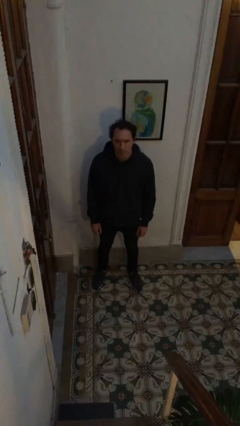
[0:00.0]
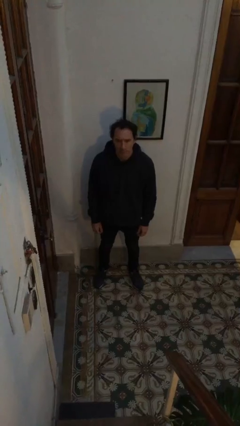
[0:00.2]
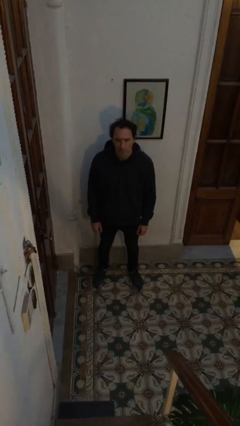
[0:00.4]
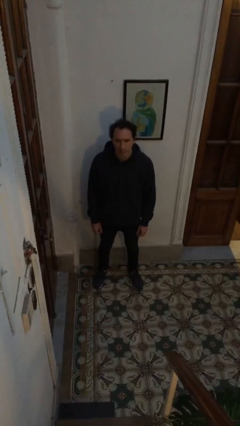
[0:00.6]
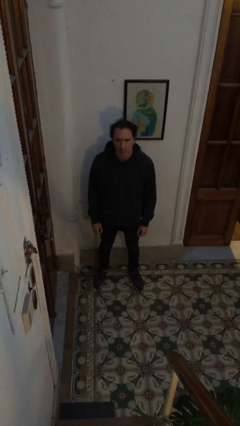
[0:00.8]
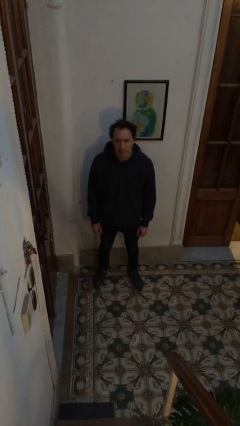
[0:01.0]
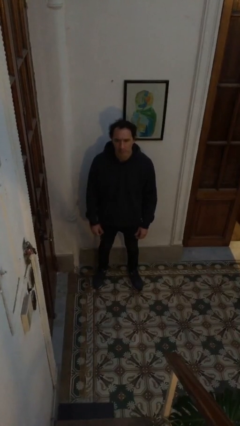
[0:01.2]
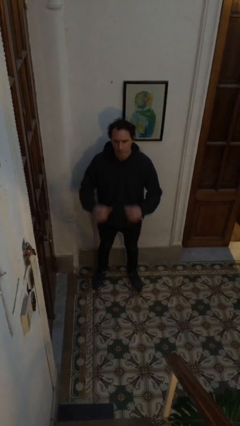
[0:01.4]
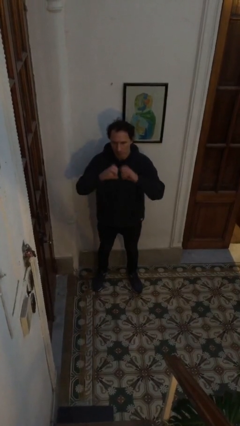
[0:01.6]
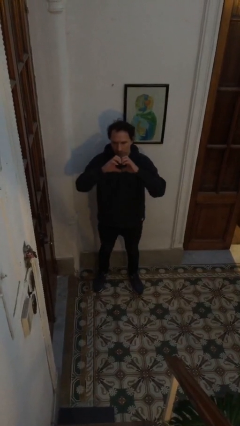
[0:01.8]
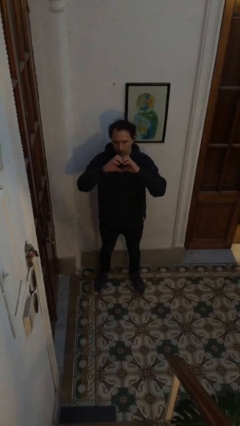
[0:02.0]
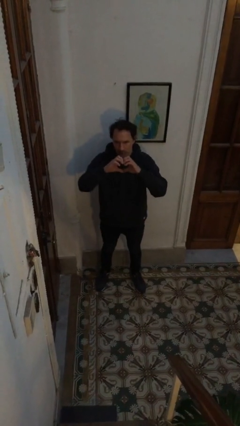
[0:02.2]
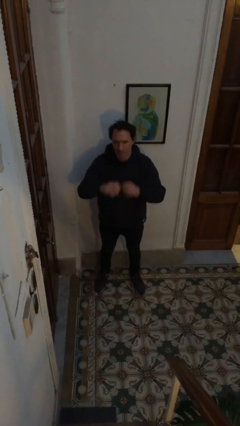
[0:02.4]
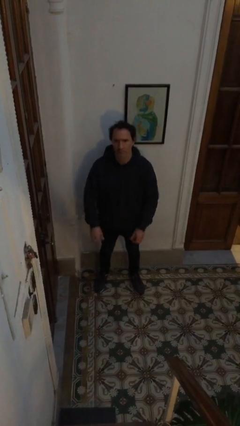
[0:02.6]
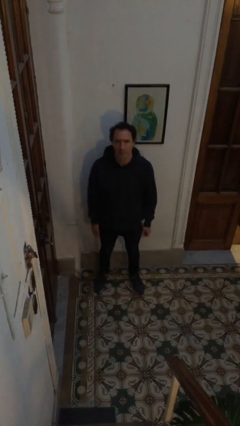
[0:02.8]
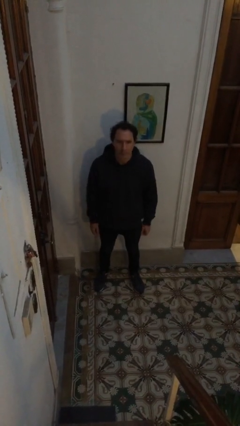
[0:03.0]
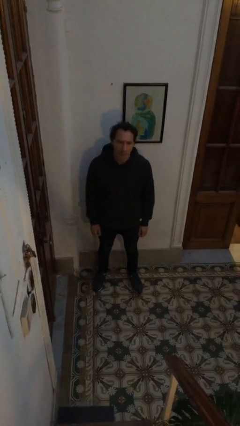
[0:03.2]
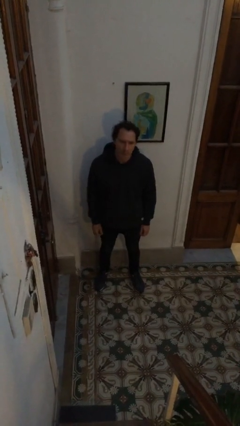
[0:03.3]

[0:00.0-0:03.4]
person gestures heart

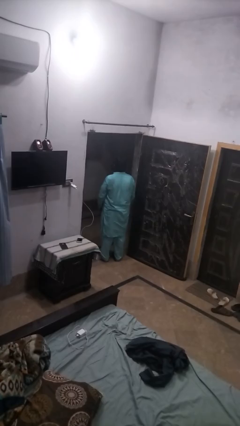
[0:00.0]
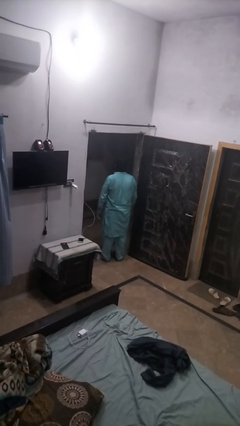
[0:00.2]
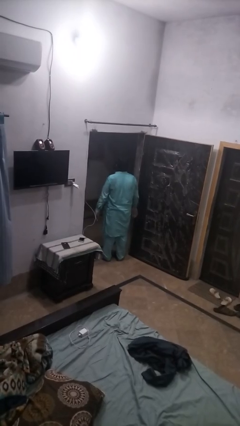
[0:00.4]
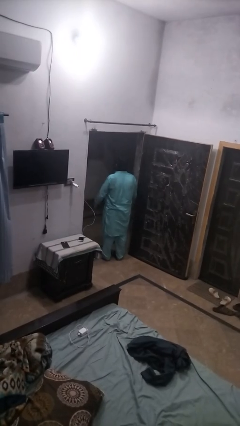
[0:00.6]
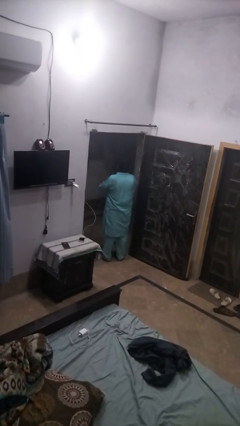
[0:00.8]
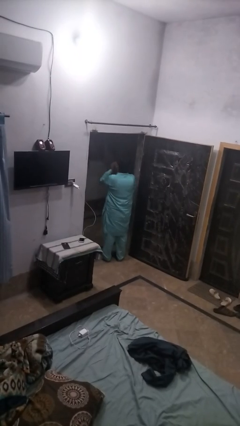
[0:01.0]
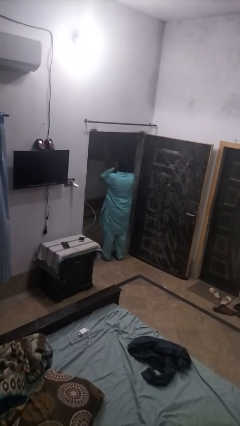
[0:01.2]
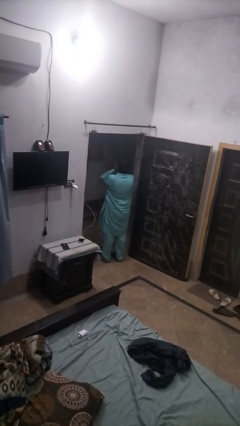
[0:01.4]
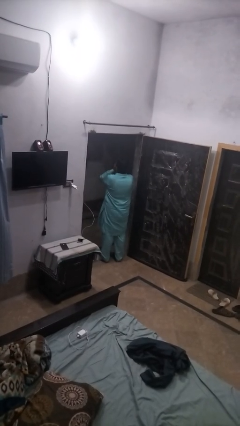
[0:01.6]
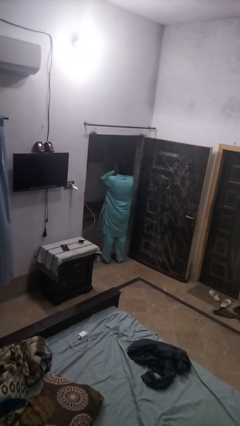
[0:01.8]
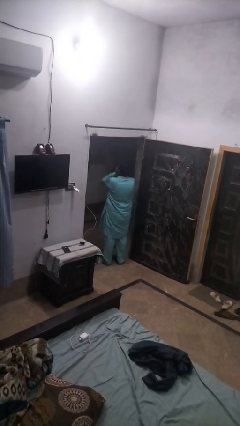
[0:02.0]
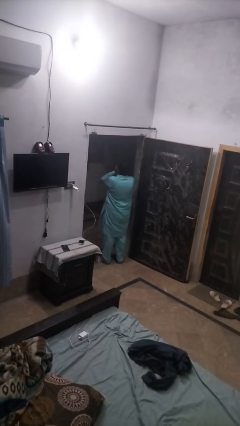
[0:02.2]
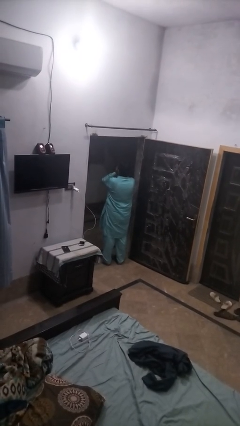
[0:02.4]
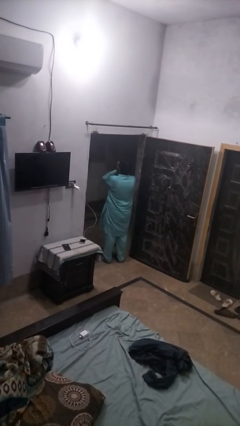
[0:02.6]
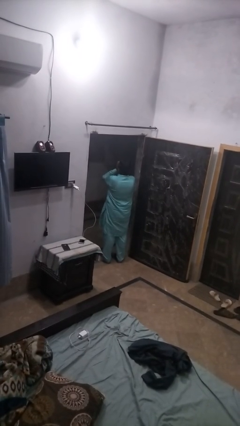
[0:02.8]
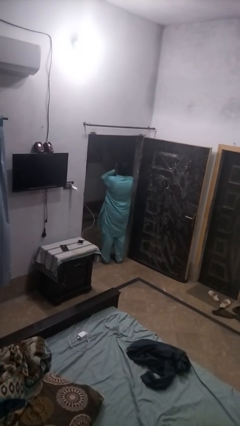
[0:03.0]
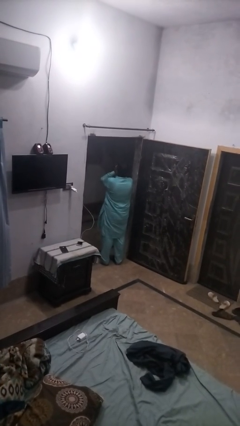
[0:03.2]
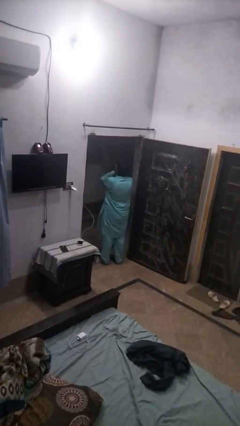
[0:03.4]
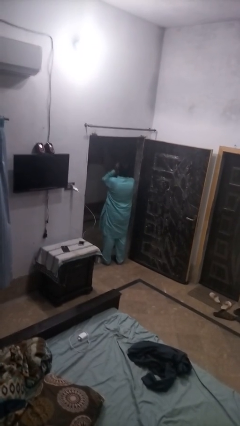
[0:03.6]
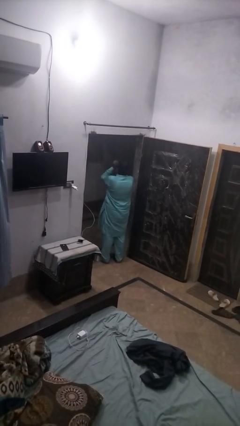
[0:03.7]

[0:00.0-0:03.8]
person blows into hands

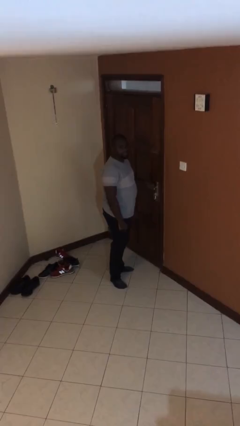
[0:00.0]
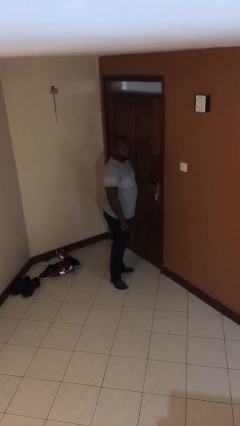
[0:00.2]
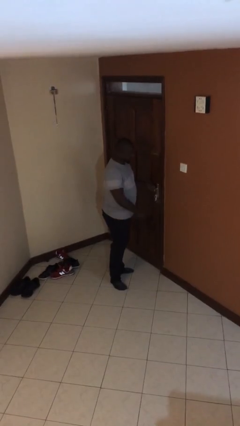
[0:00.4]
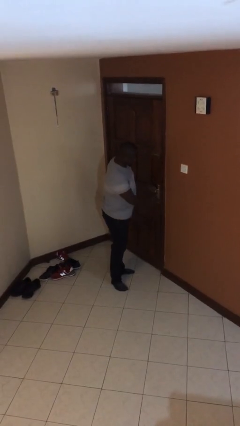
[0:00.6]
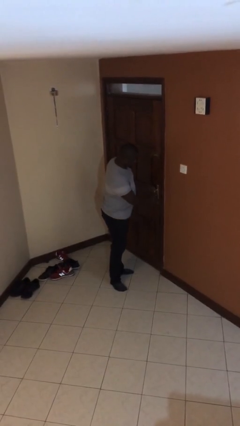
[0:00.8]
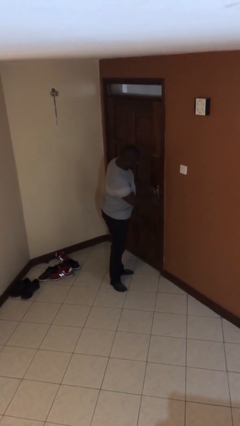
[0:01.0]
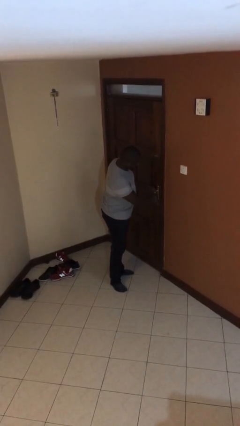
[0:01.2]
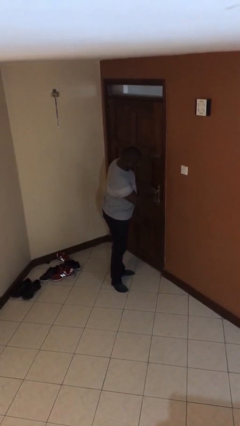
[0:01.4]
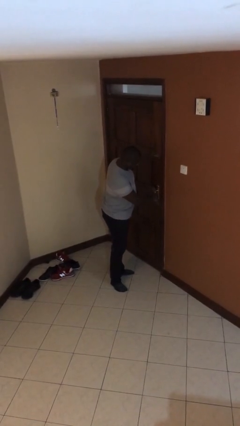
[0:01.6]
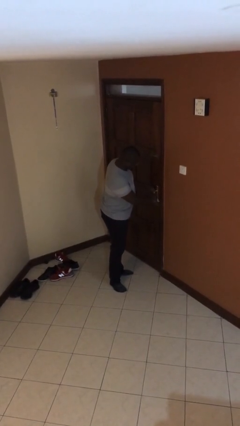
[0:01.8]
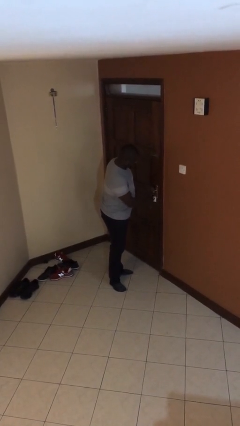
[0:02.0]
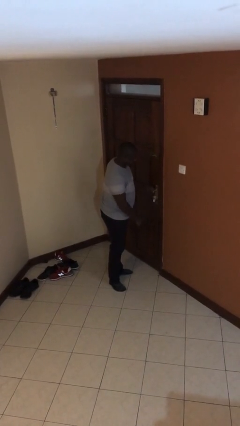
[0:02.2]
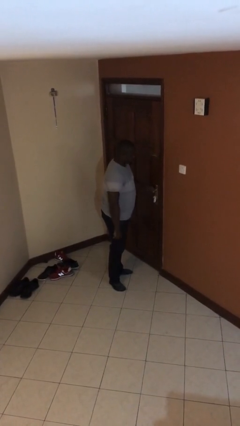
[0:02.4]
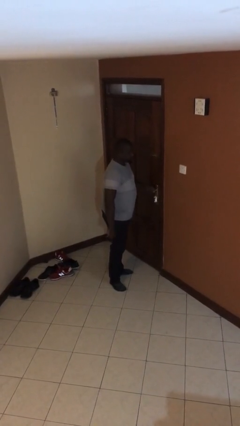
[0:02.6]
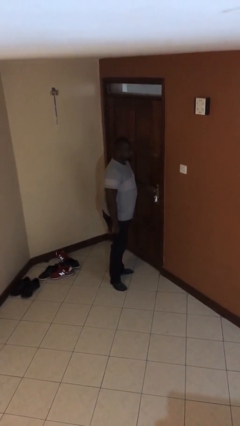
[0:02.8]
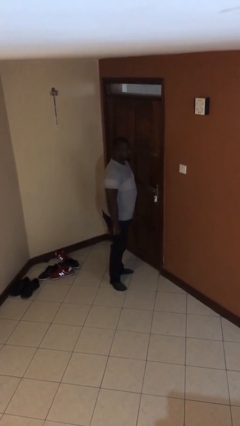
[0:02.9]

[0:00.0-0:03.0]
person unlocks door with keys

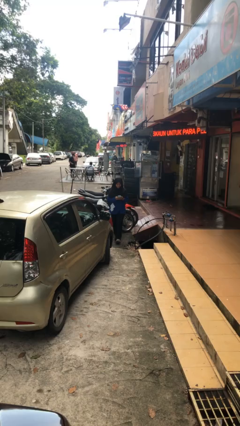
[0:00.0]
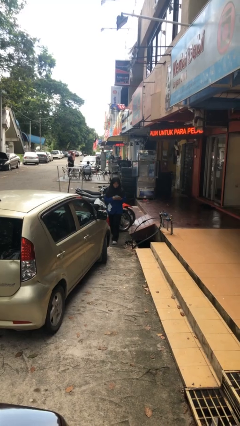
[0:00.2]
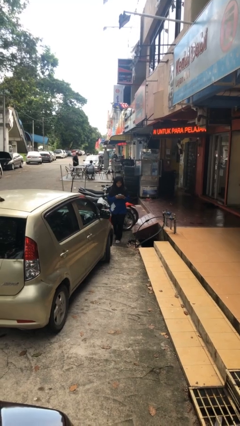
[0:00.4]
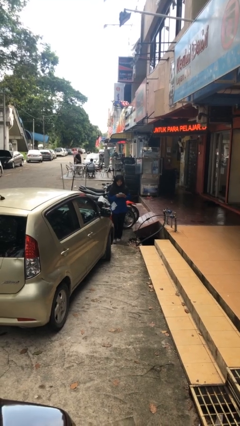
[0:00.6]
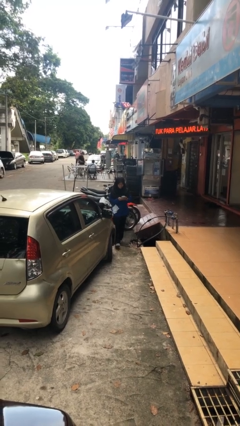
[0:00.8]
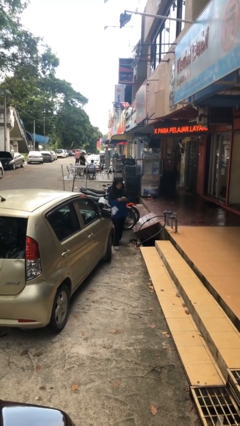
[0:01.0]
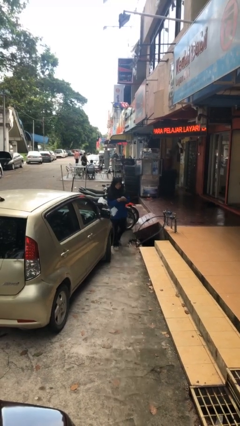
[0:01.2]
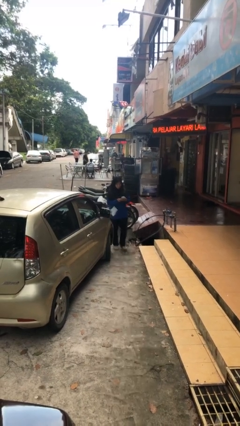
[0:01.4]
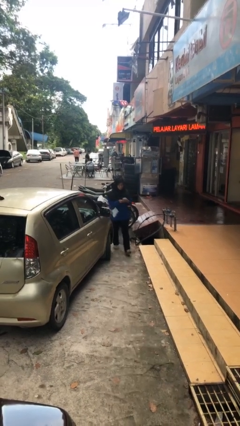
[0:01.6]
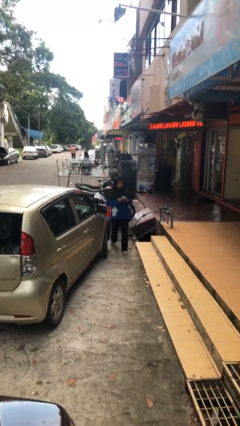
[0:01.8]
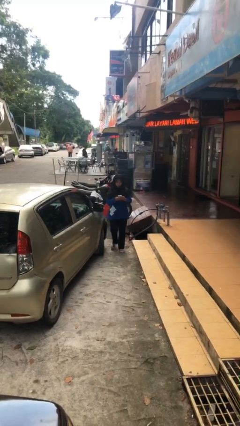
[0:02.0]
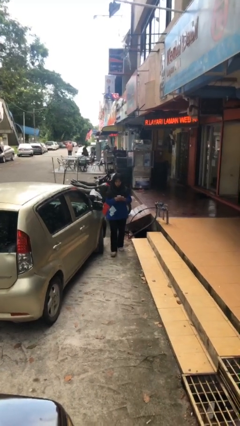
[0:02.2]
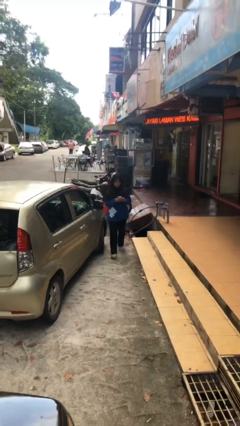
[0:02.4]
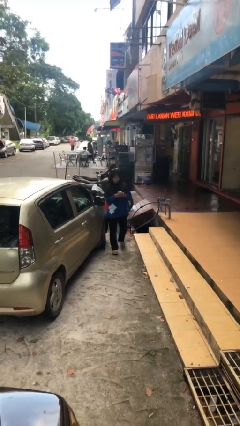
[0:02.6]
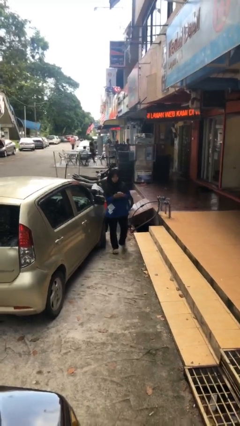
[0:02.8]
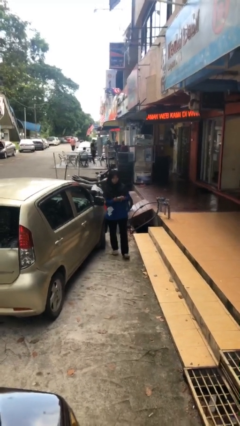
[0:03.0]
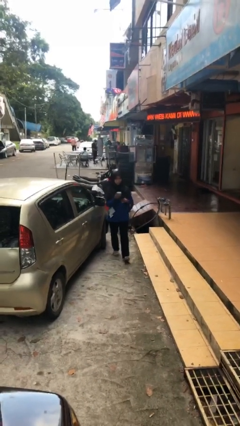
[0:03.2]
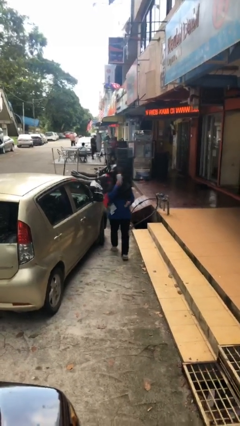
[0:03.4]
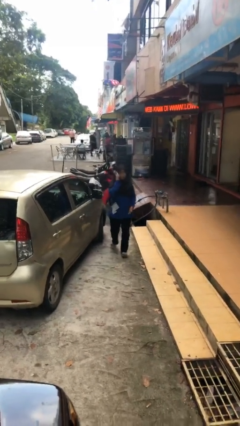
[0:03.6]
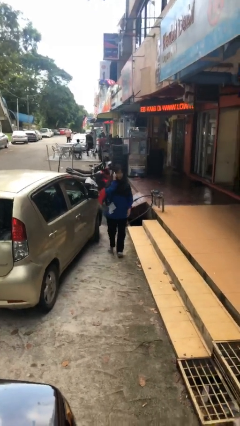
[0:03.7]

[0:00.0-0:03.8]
person texts on phone

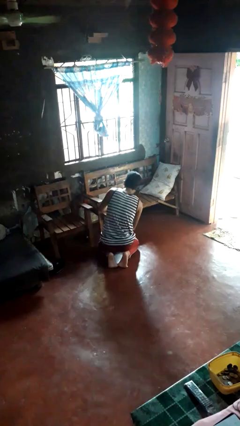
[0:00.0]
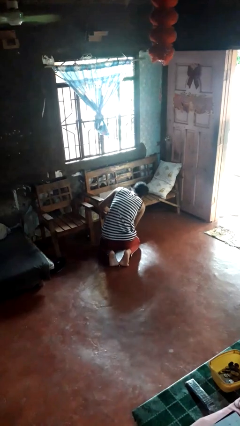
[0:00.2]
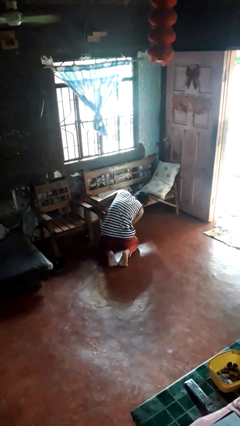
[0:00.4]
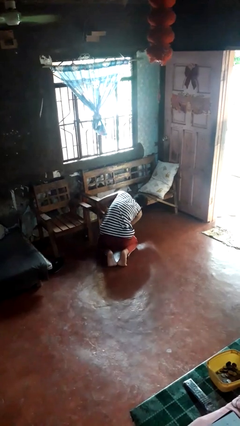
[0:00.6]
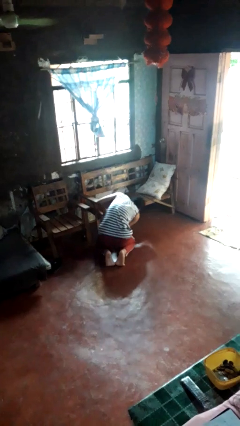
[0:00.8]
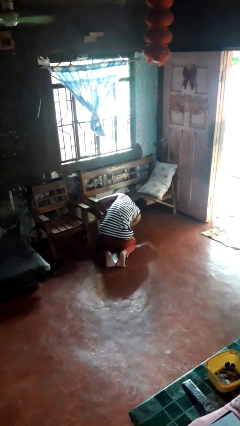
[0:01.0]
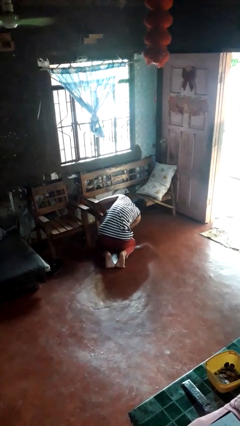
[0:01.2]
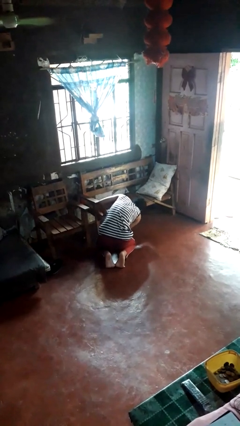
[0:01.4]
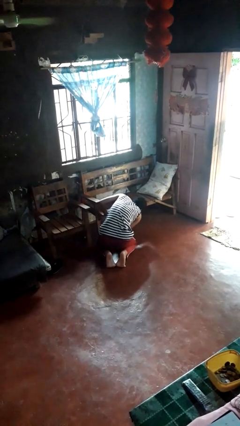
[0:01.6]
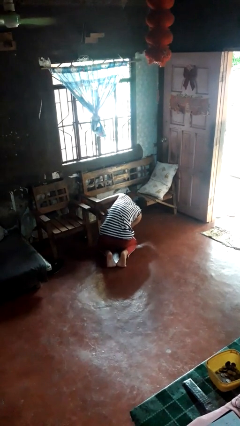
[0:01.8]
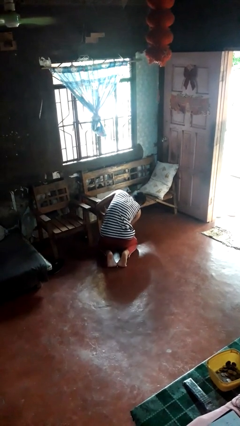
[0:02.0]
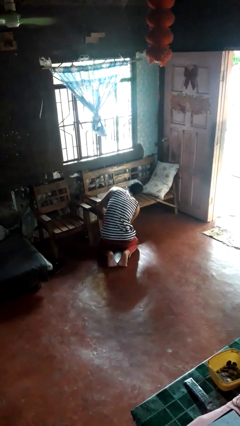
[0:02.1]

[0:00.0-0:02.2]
person searches in couch

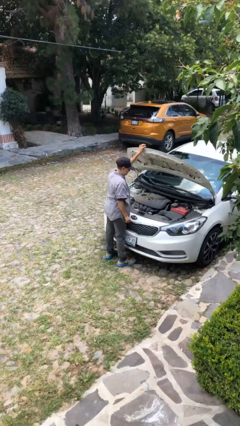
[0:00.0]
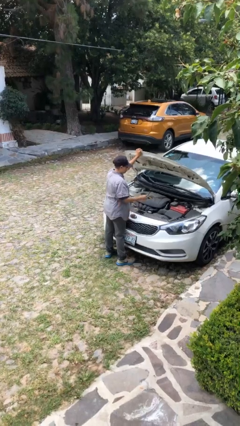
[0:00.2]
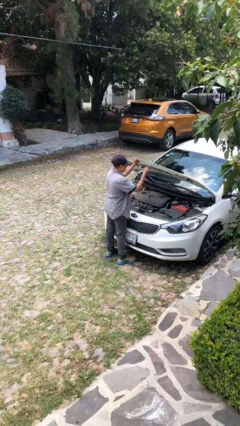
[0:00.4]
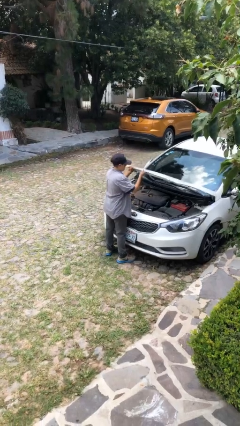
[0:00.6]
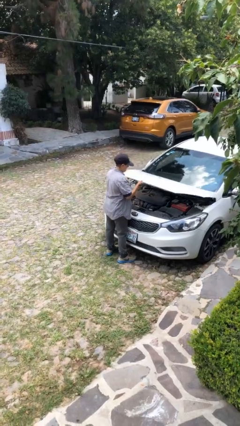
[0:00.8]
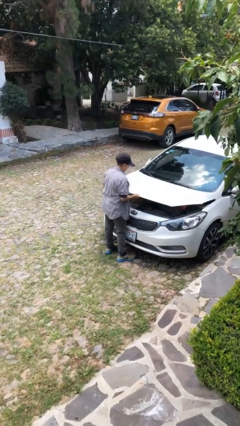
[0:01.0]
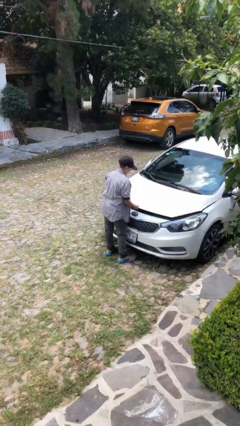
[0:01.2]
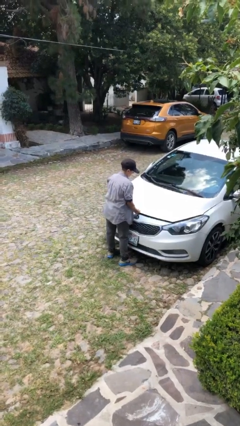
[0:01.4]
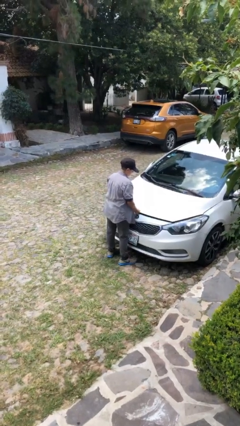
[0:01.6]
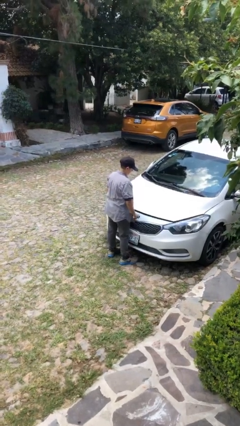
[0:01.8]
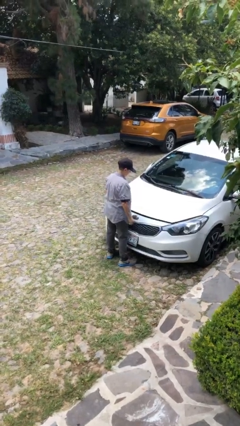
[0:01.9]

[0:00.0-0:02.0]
person closes car hood
